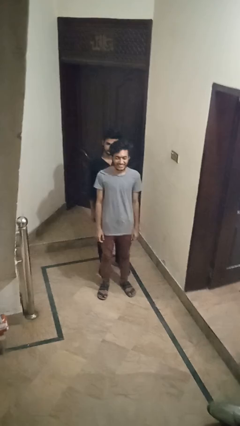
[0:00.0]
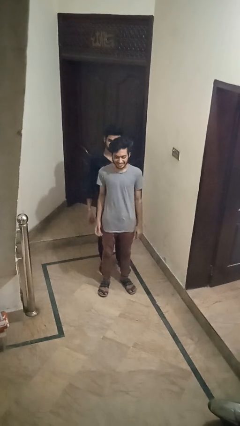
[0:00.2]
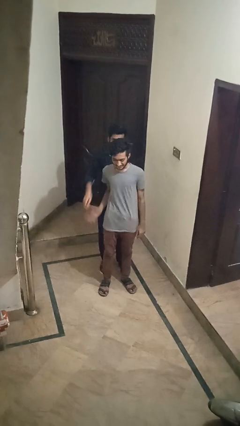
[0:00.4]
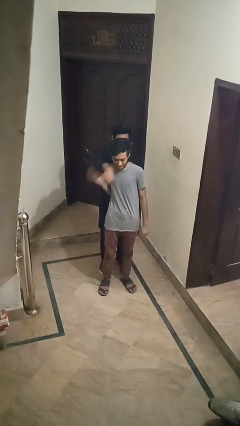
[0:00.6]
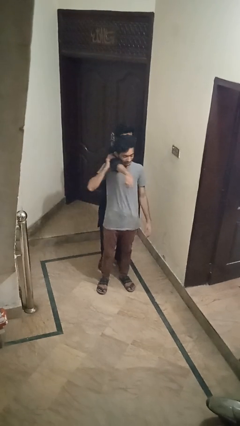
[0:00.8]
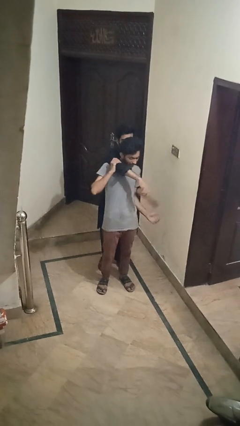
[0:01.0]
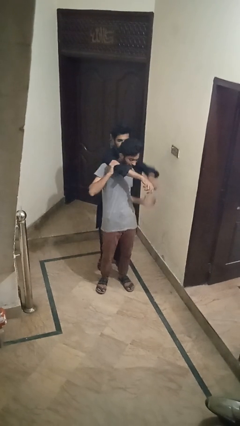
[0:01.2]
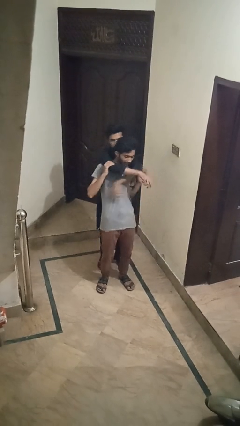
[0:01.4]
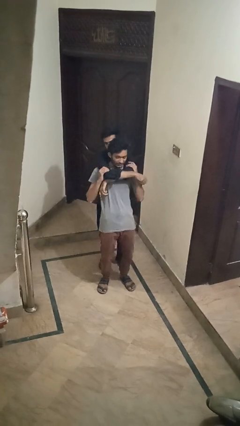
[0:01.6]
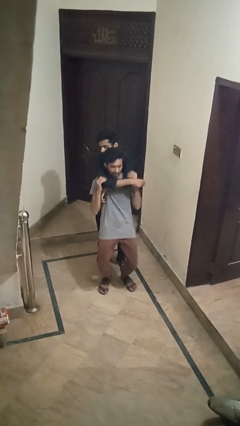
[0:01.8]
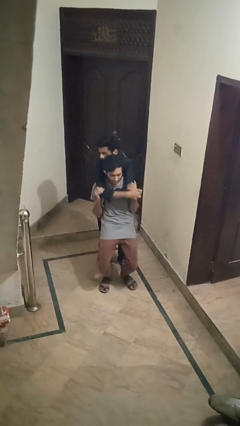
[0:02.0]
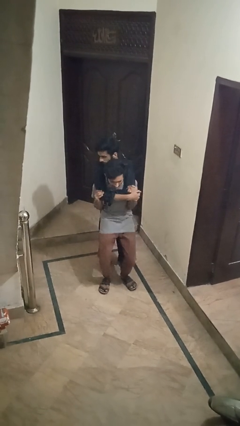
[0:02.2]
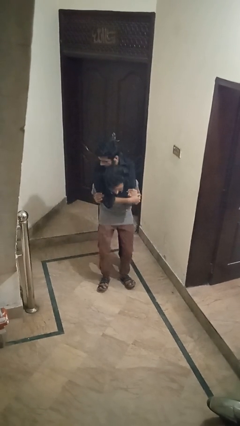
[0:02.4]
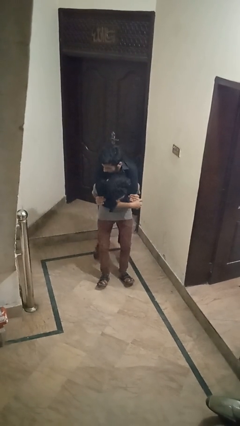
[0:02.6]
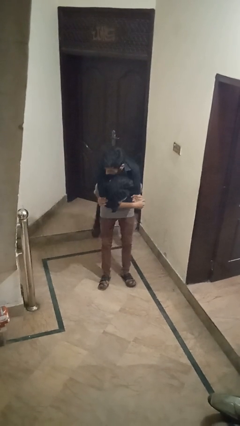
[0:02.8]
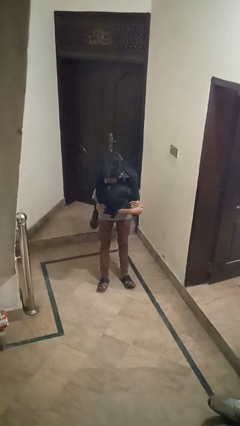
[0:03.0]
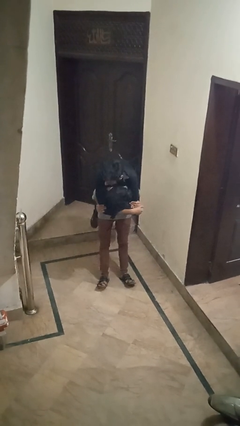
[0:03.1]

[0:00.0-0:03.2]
person carries person over shoulder

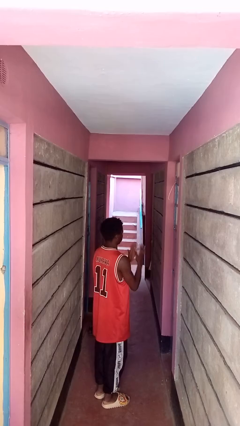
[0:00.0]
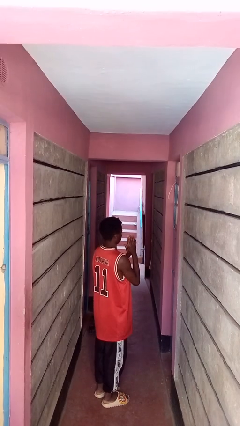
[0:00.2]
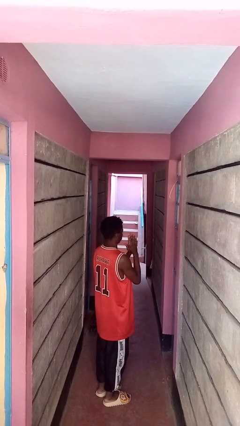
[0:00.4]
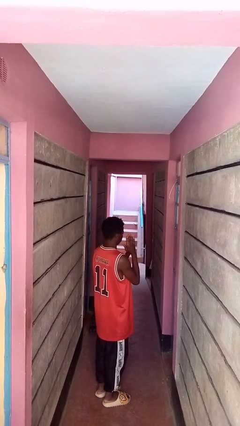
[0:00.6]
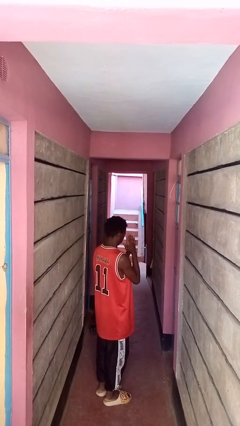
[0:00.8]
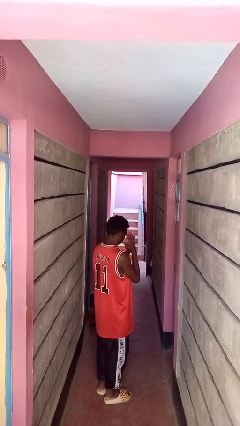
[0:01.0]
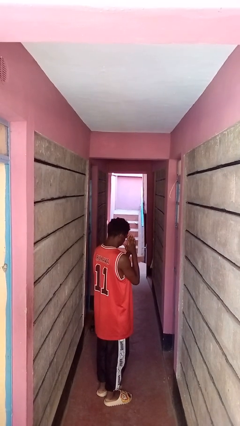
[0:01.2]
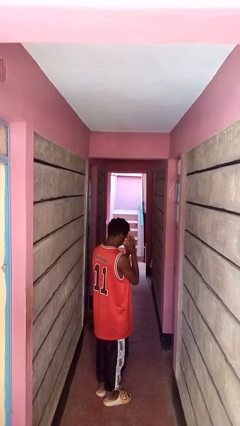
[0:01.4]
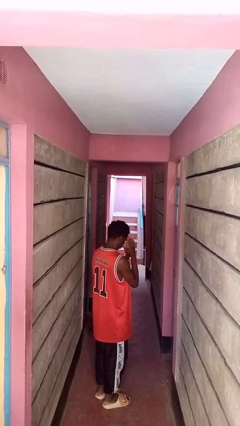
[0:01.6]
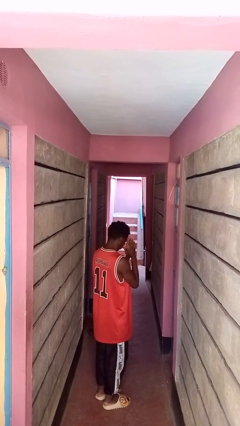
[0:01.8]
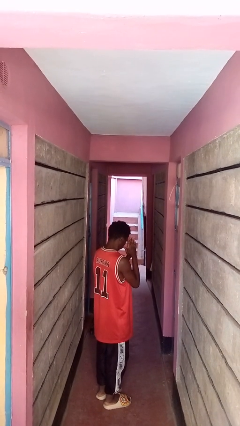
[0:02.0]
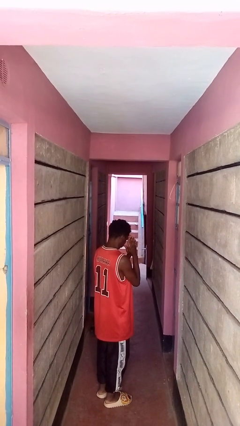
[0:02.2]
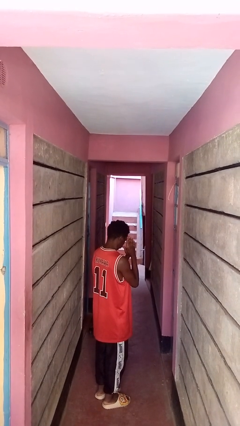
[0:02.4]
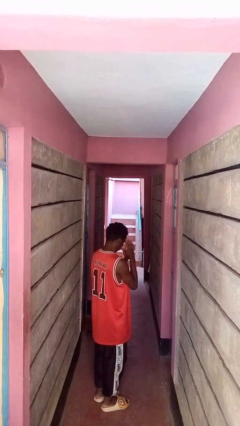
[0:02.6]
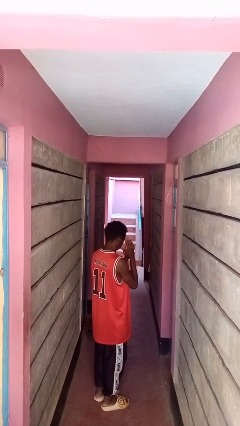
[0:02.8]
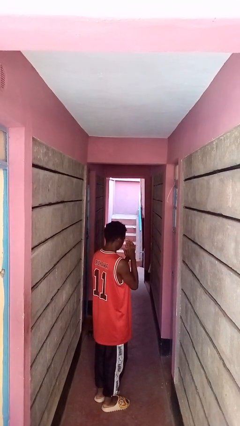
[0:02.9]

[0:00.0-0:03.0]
person prays

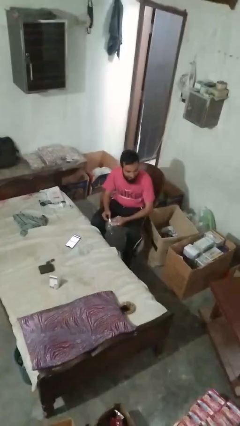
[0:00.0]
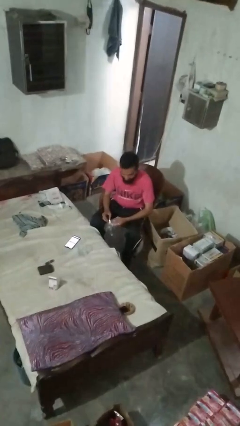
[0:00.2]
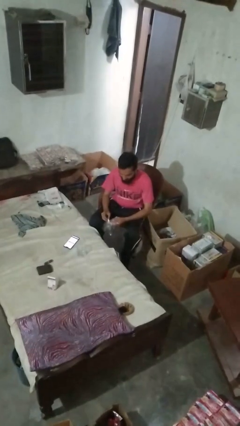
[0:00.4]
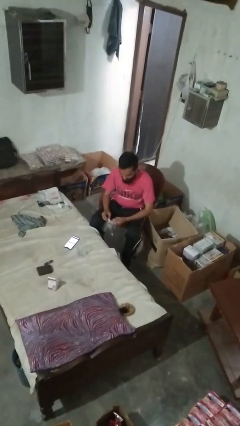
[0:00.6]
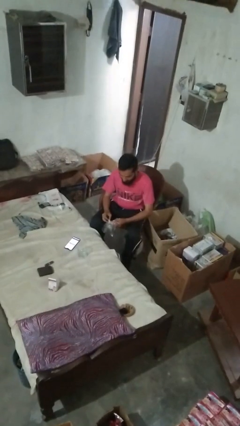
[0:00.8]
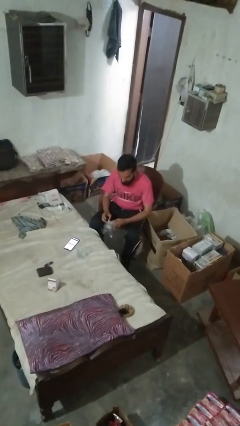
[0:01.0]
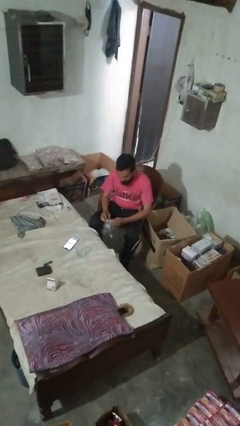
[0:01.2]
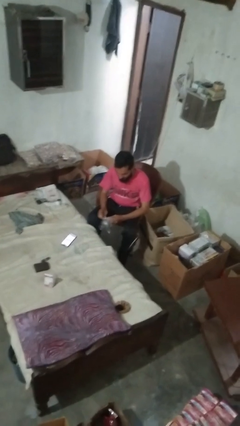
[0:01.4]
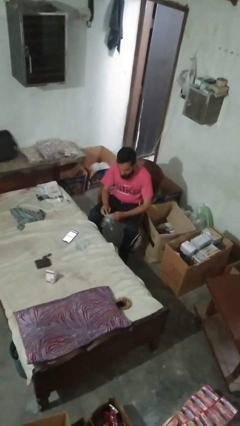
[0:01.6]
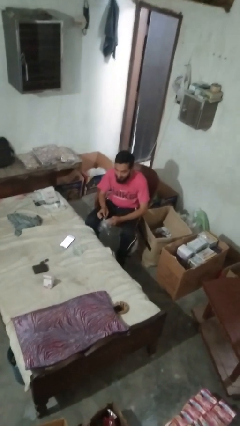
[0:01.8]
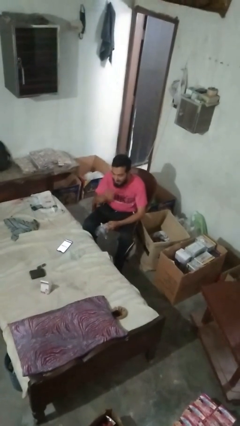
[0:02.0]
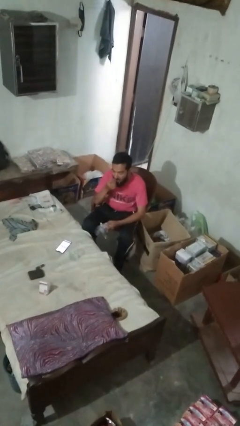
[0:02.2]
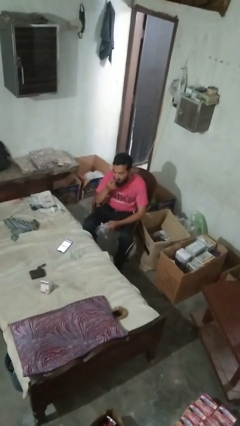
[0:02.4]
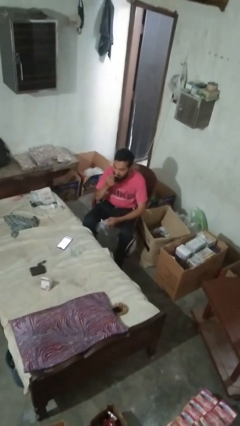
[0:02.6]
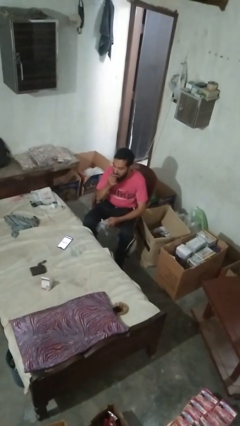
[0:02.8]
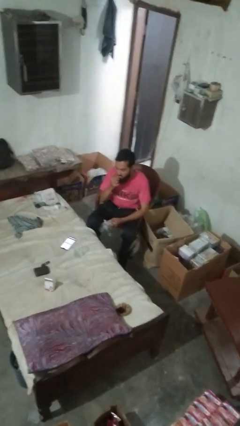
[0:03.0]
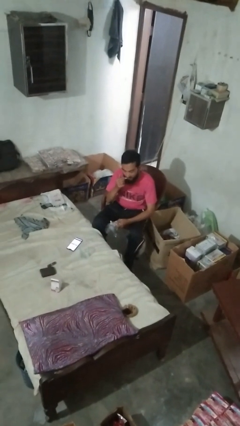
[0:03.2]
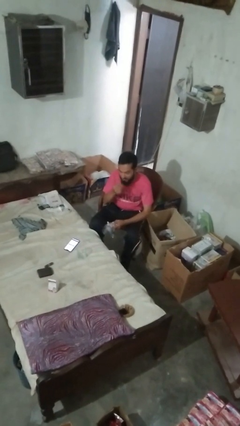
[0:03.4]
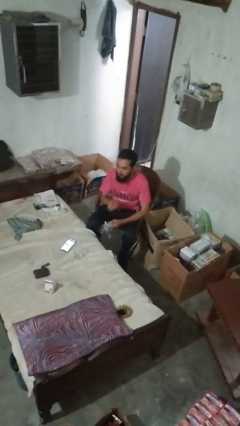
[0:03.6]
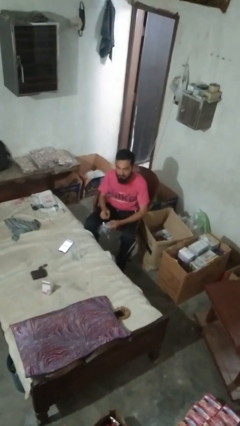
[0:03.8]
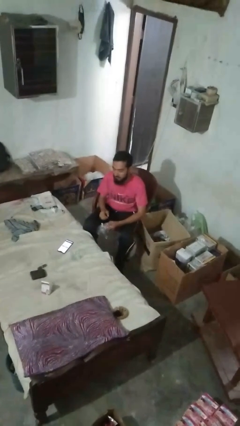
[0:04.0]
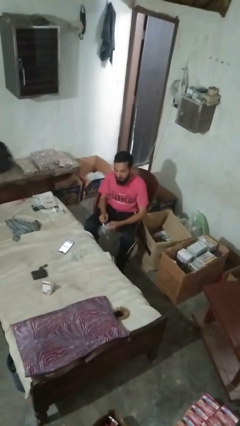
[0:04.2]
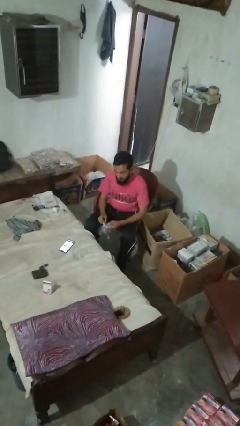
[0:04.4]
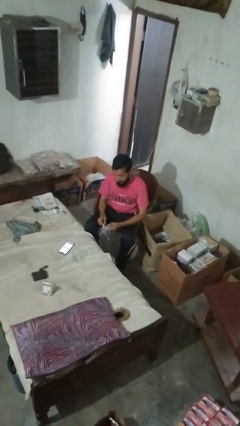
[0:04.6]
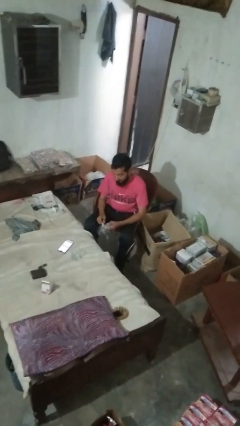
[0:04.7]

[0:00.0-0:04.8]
person licks fingers

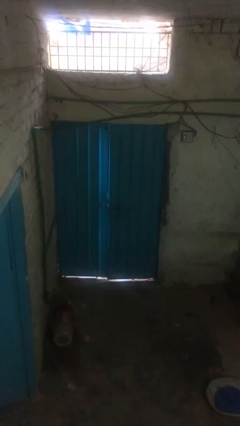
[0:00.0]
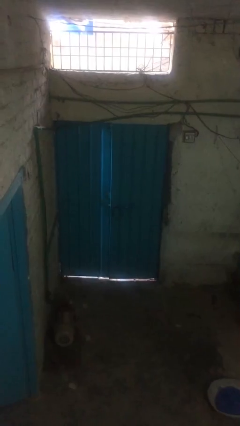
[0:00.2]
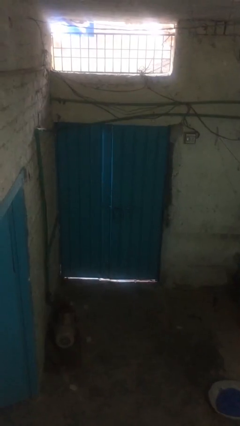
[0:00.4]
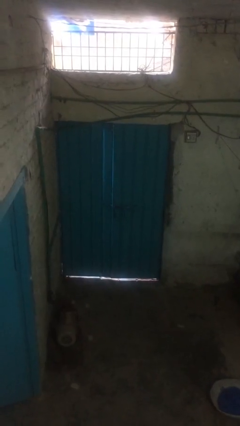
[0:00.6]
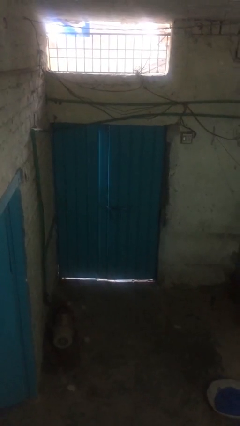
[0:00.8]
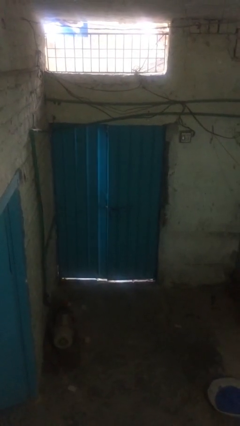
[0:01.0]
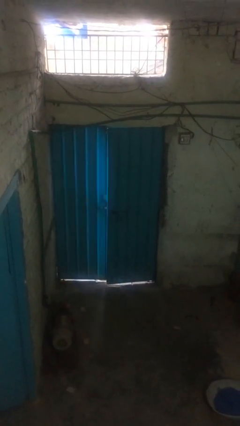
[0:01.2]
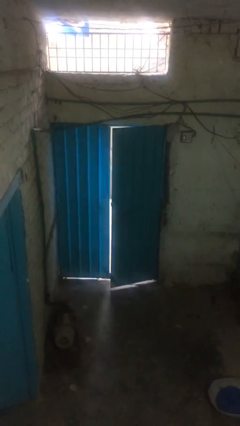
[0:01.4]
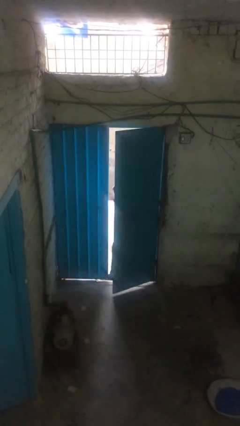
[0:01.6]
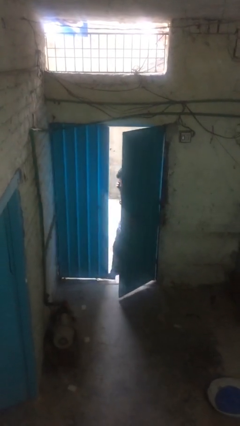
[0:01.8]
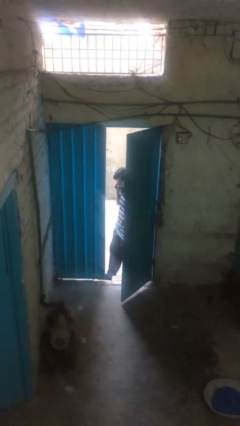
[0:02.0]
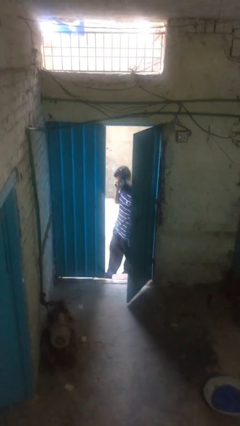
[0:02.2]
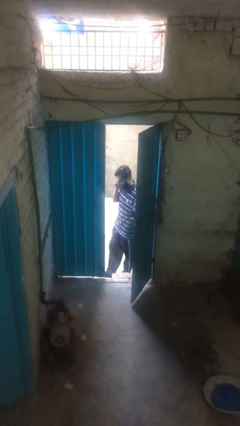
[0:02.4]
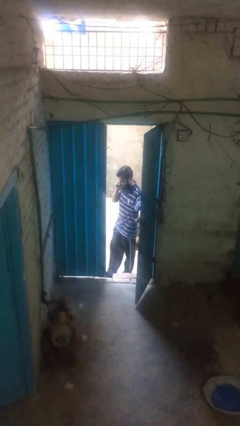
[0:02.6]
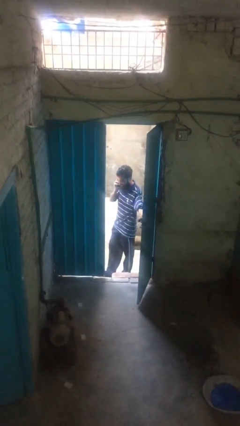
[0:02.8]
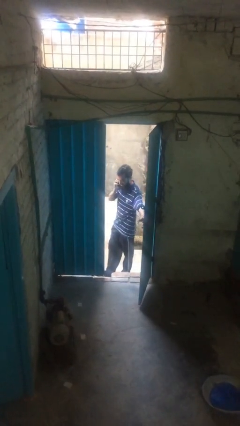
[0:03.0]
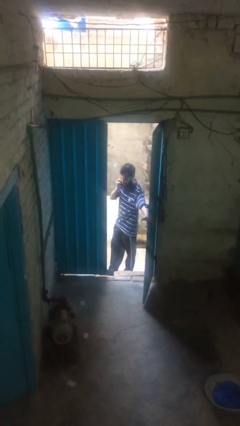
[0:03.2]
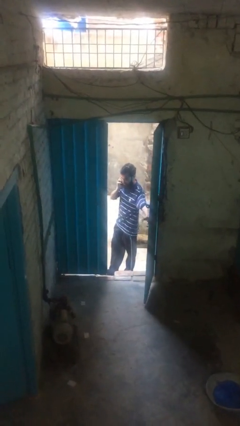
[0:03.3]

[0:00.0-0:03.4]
person opens facility door

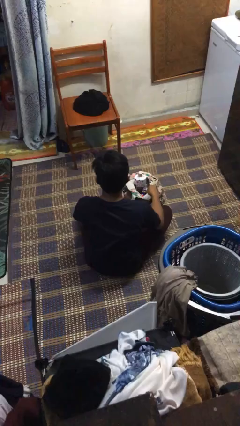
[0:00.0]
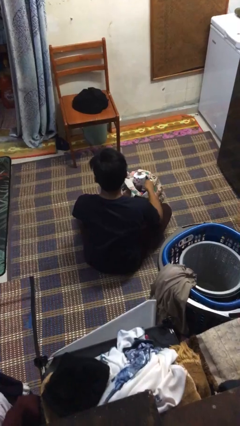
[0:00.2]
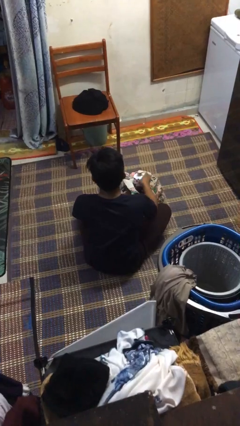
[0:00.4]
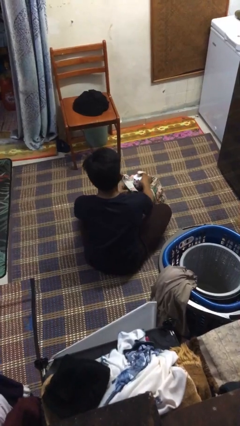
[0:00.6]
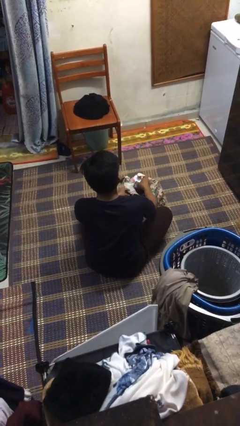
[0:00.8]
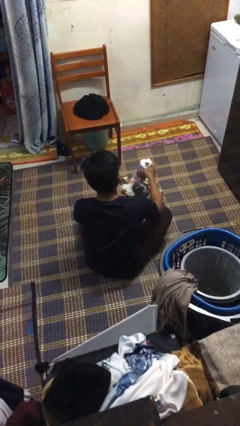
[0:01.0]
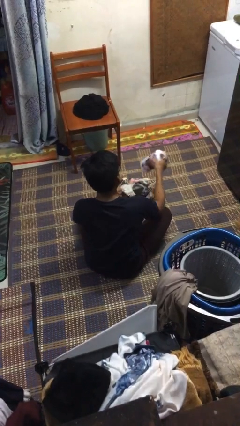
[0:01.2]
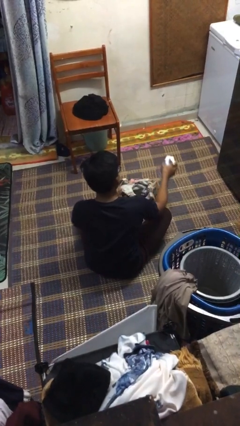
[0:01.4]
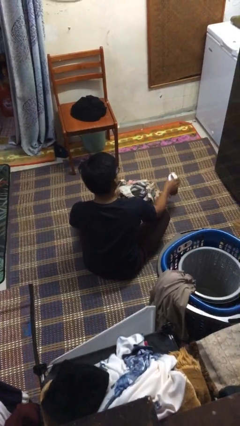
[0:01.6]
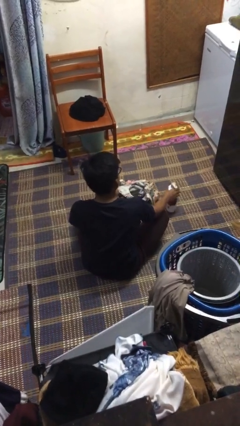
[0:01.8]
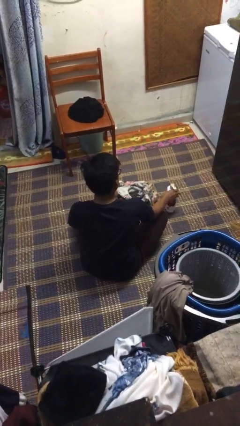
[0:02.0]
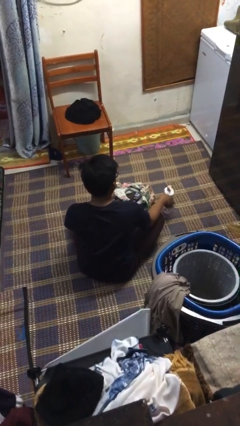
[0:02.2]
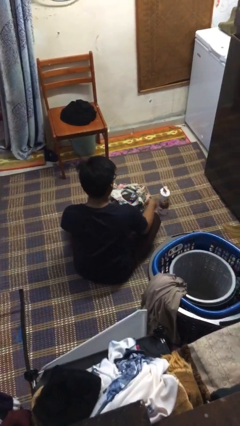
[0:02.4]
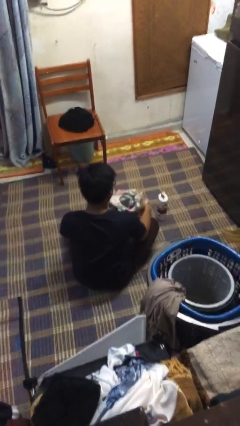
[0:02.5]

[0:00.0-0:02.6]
person takes object from bag

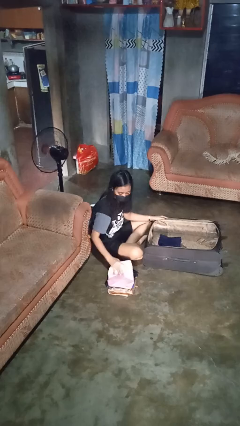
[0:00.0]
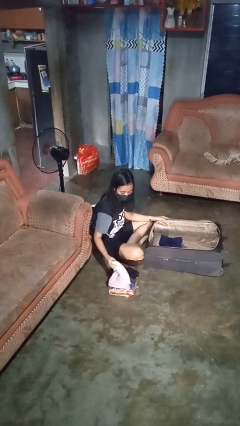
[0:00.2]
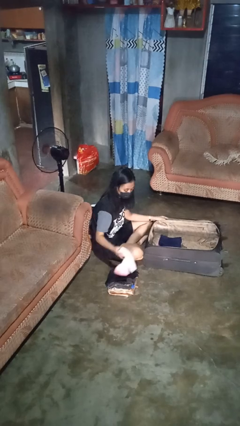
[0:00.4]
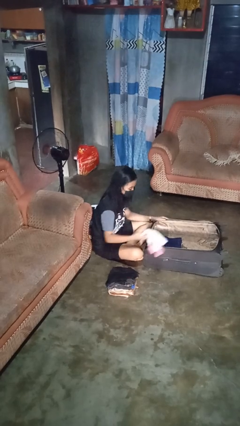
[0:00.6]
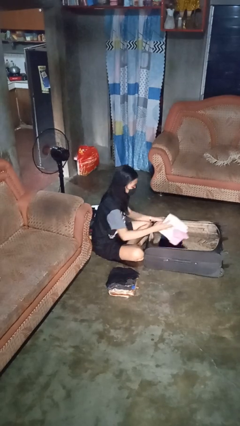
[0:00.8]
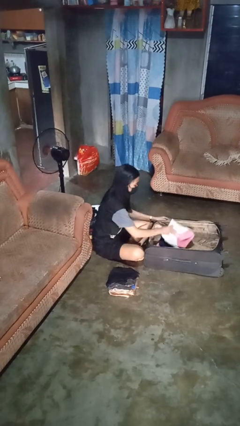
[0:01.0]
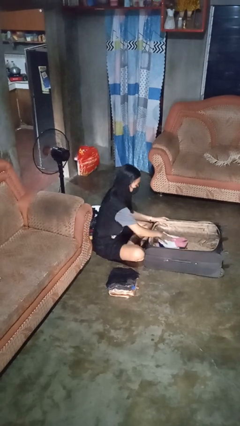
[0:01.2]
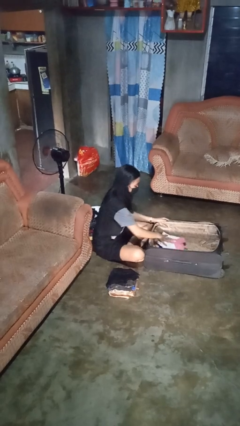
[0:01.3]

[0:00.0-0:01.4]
person loads clothes into suitcase
